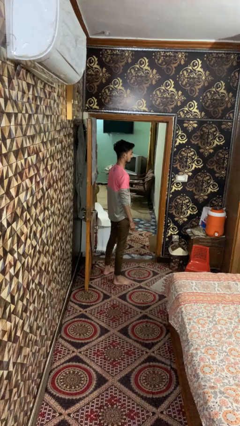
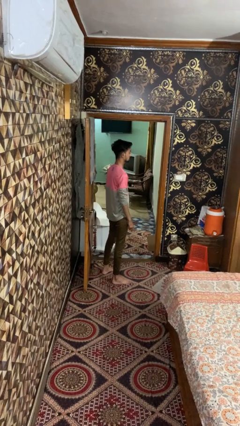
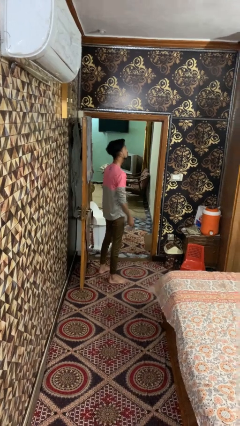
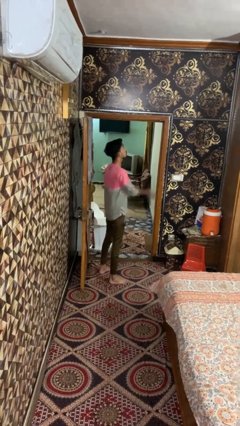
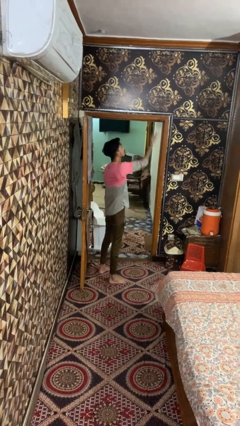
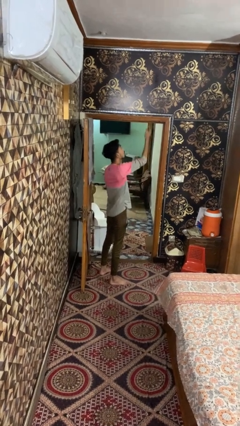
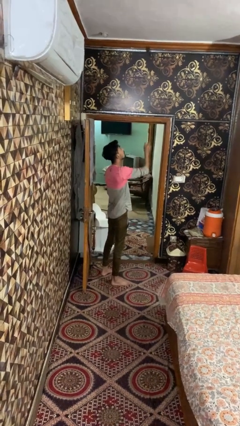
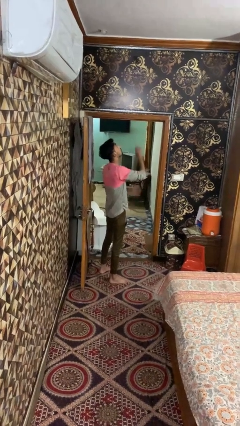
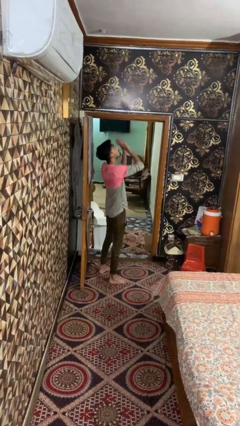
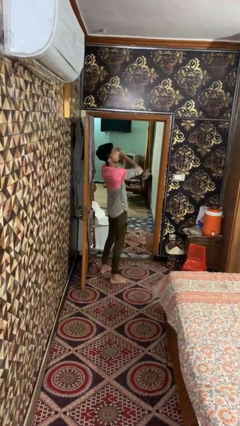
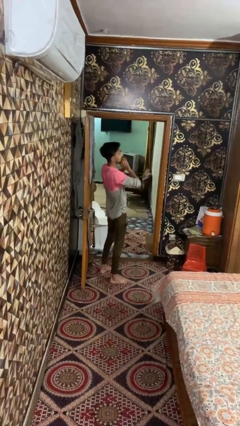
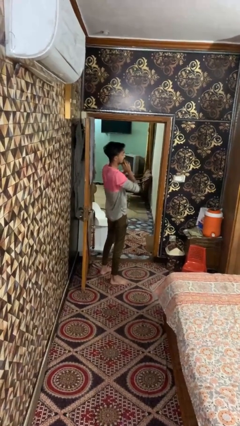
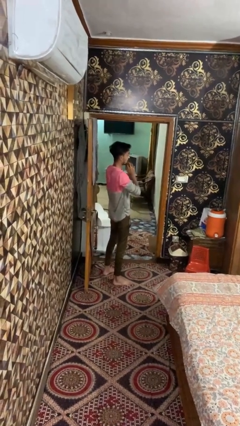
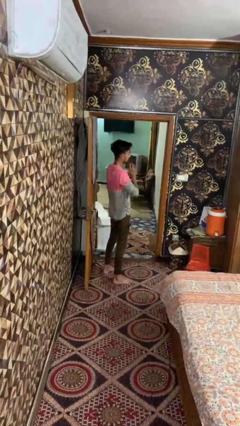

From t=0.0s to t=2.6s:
person drops object

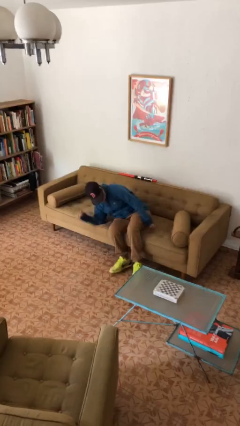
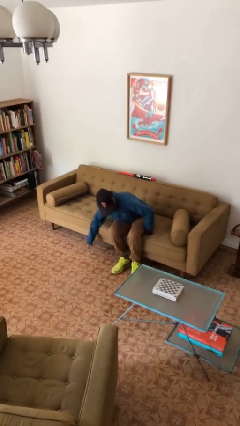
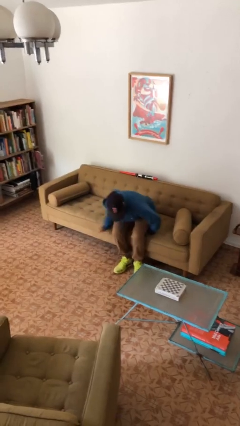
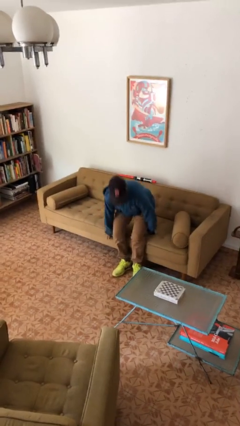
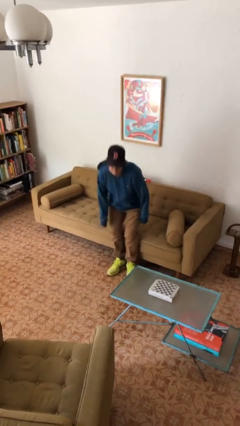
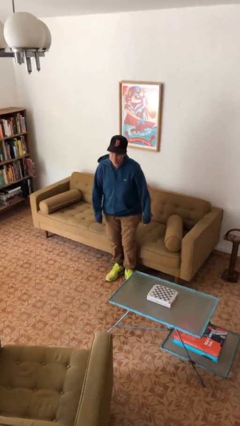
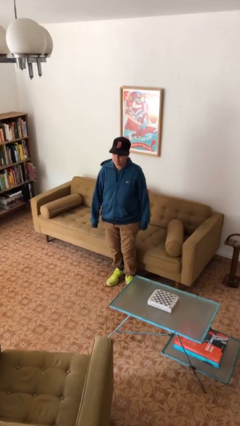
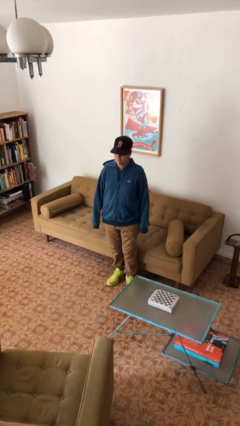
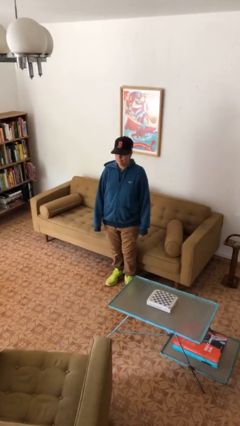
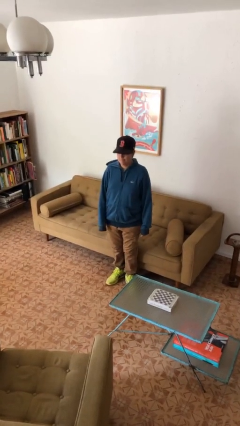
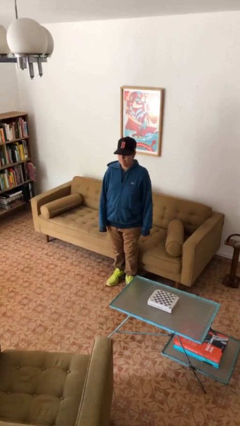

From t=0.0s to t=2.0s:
person stands up

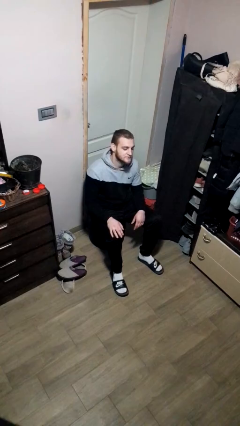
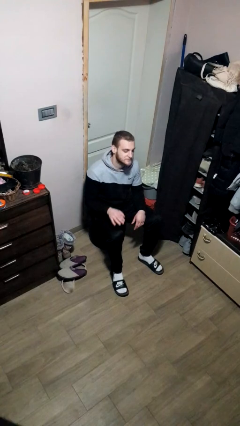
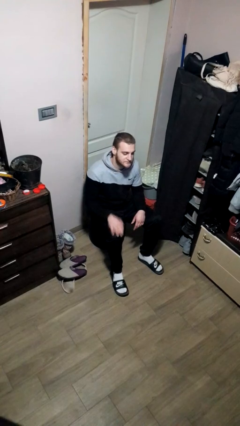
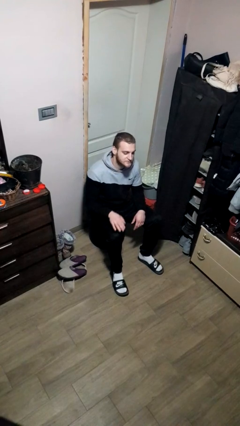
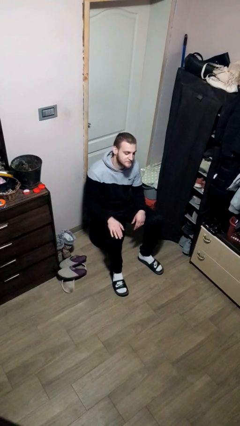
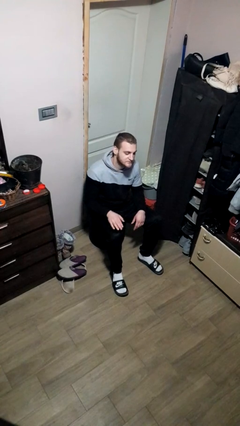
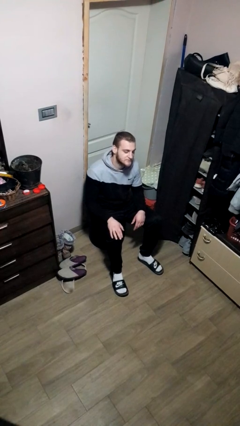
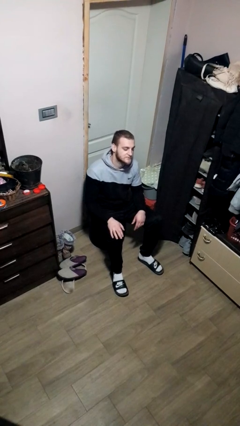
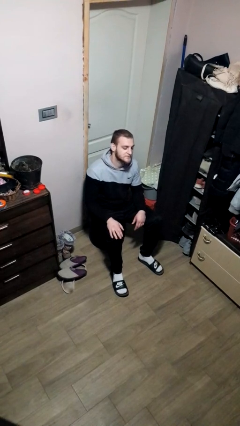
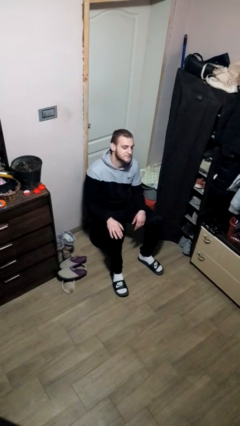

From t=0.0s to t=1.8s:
person slaps hands on thighs

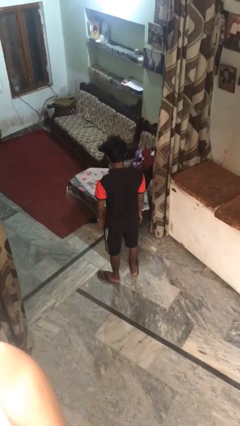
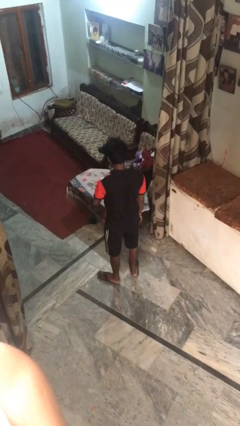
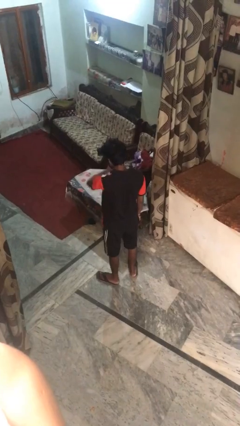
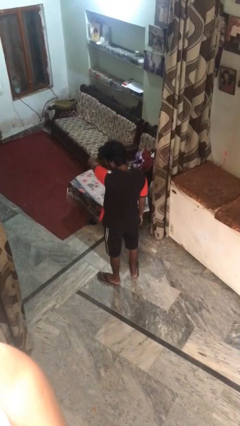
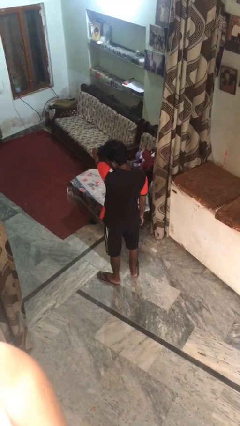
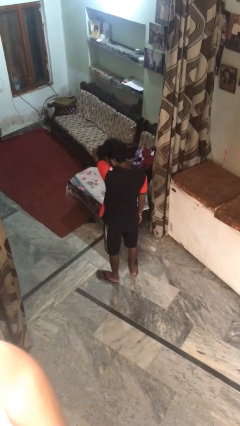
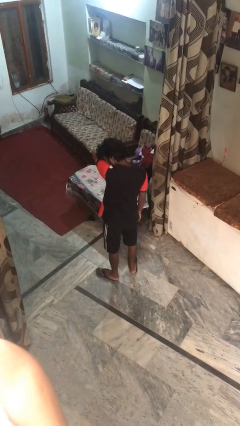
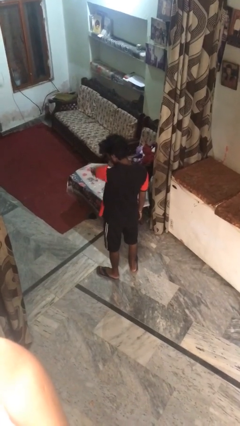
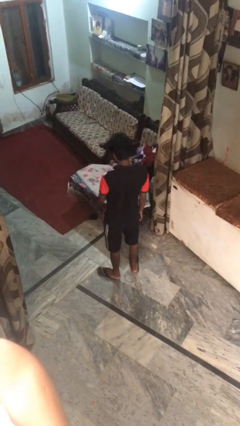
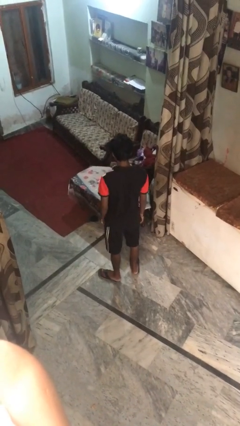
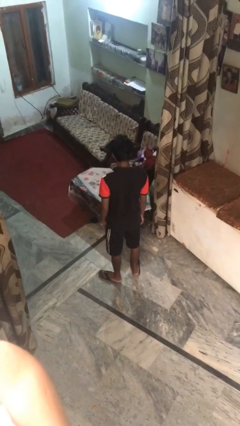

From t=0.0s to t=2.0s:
person sneezes into arm

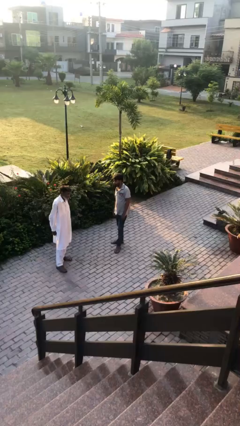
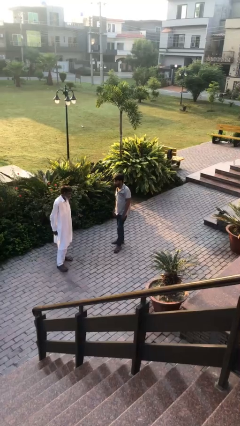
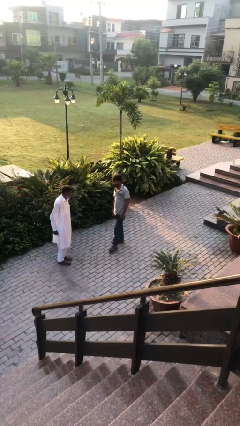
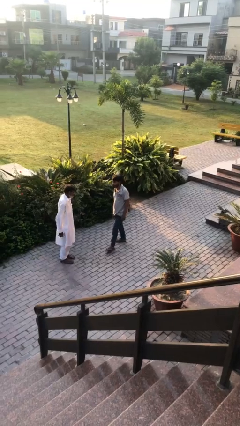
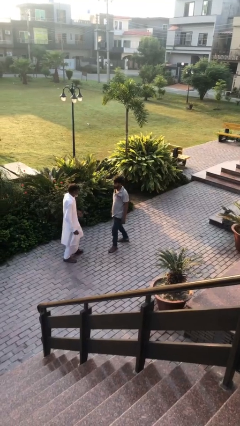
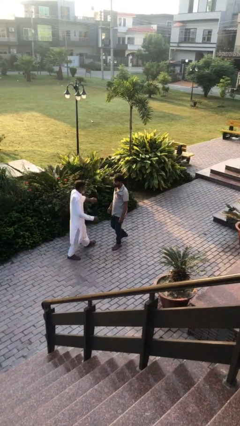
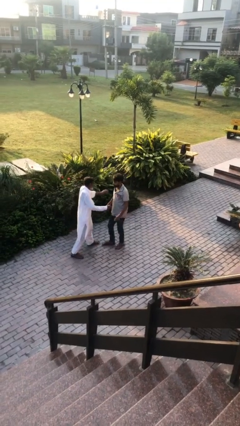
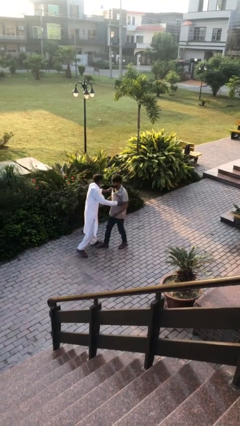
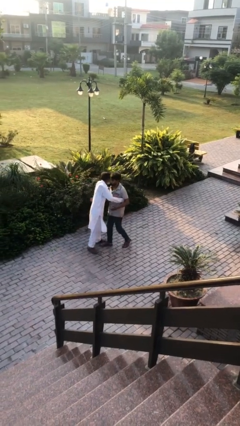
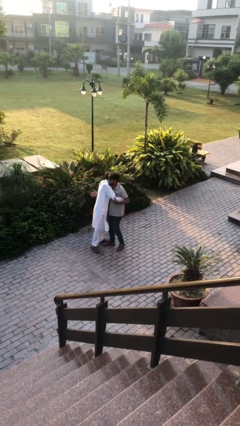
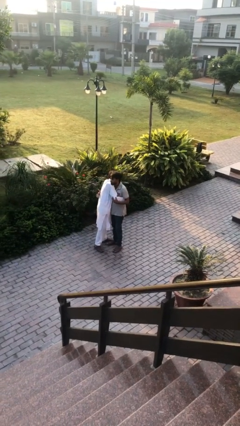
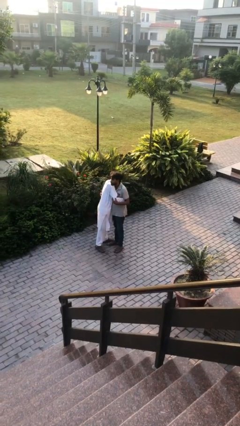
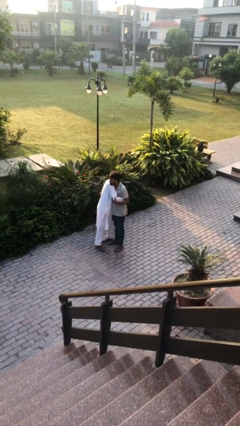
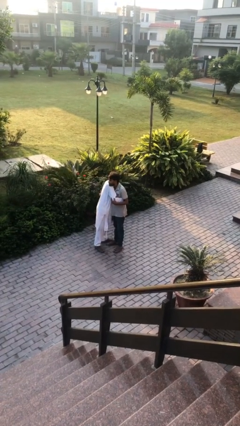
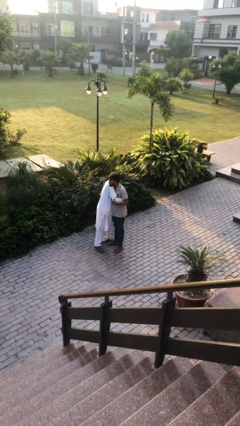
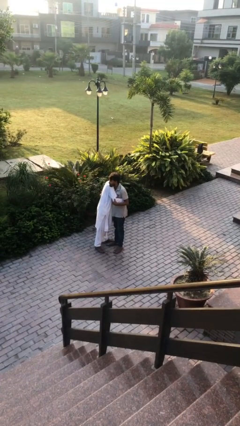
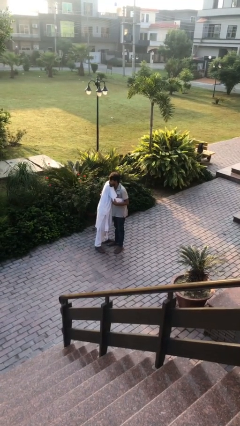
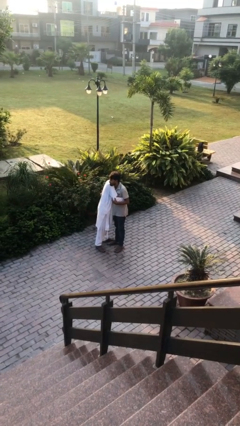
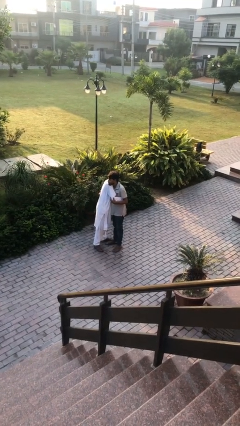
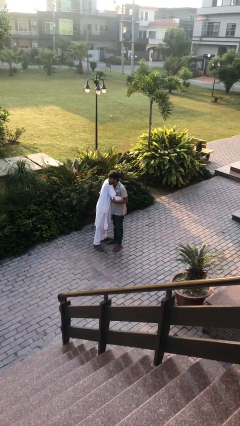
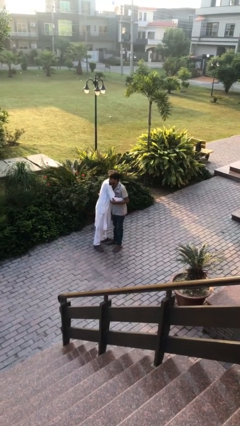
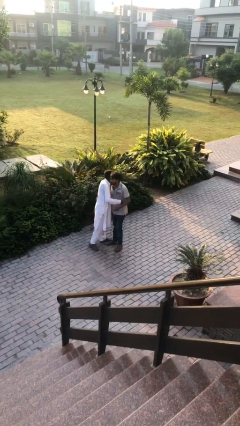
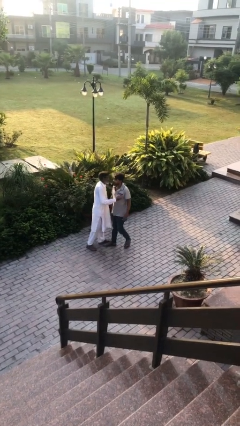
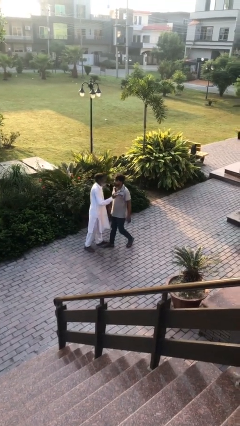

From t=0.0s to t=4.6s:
person embraces person

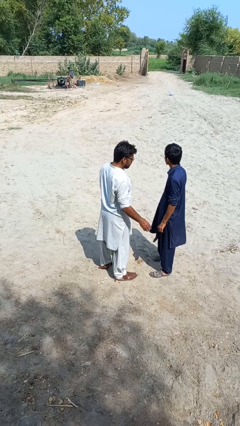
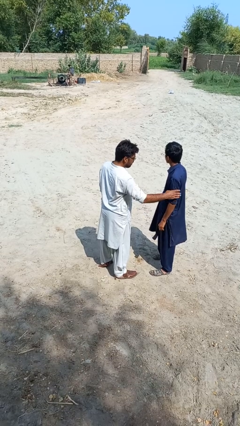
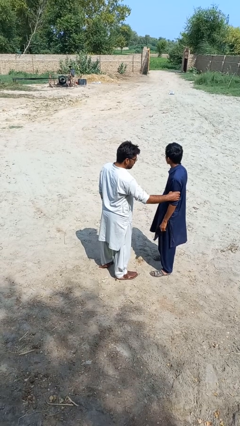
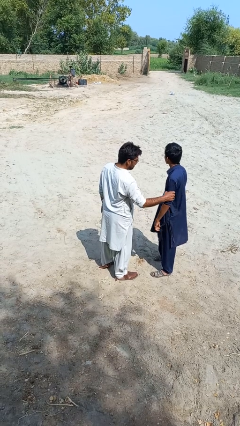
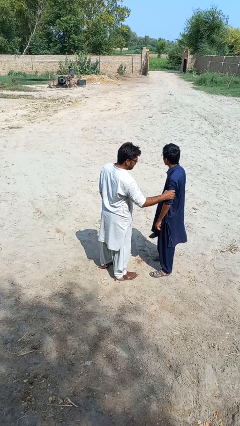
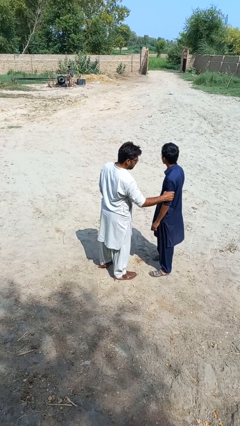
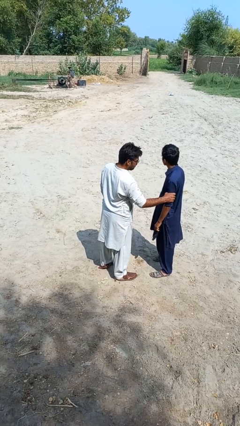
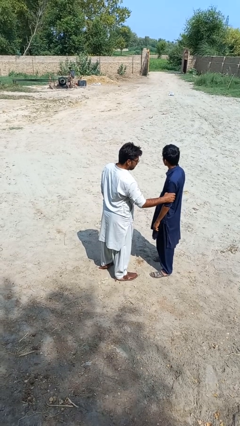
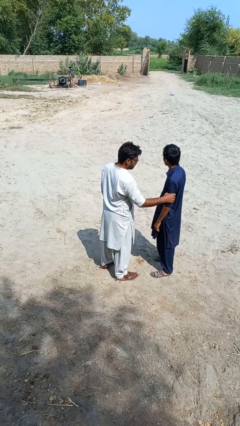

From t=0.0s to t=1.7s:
person grabs person by bicep

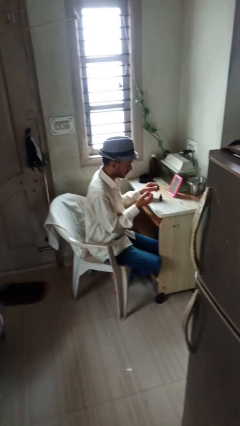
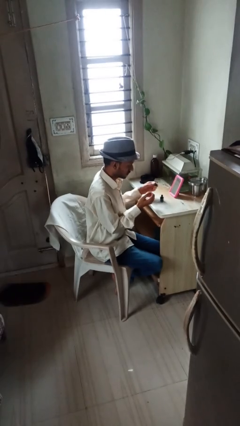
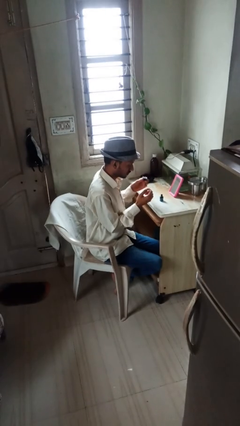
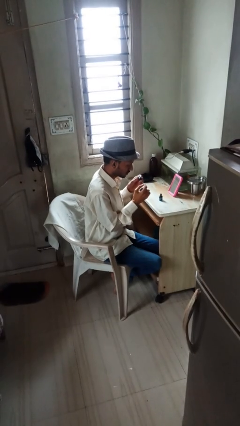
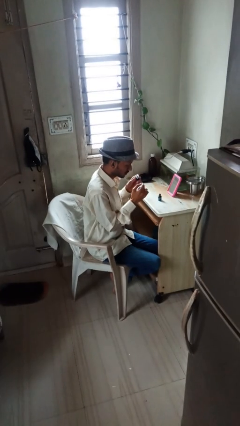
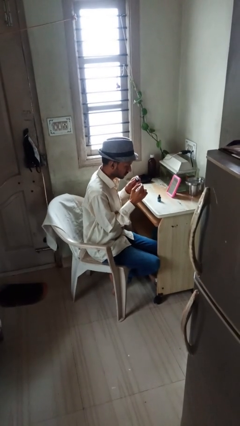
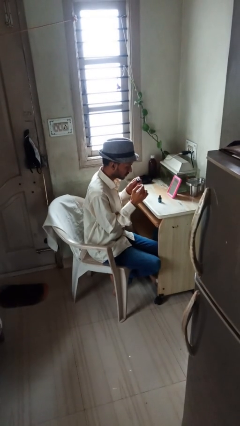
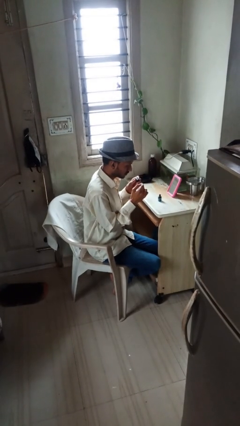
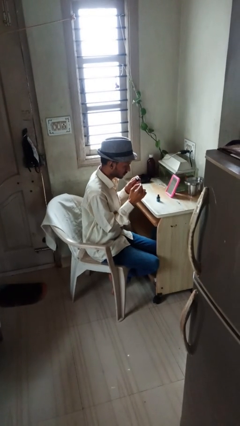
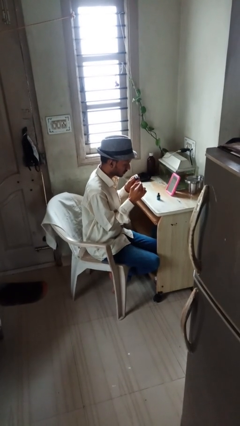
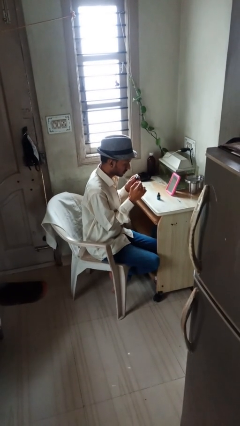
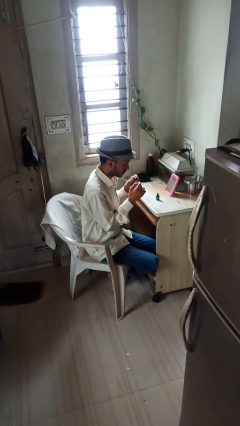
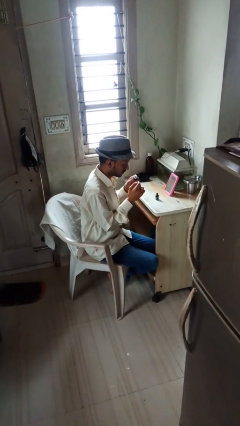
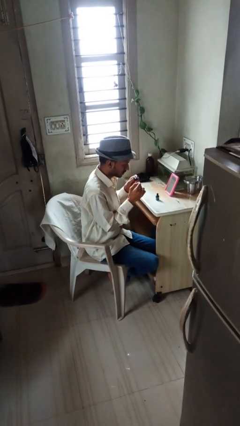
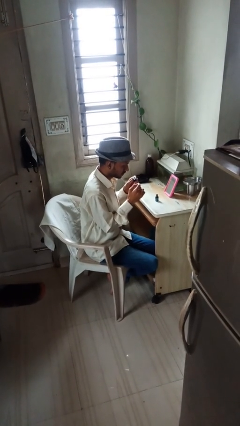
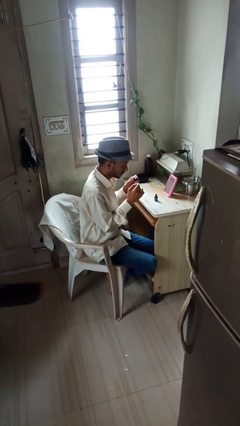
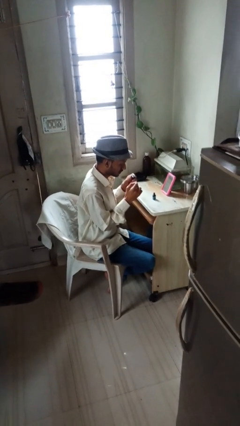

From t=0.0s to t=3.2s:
person paints fingernails
